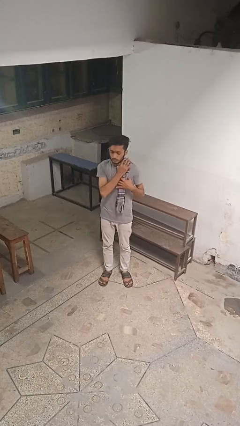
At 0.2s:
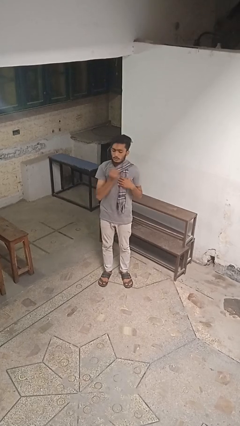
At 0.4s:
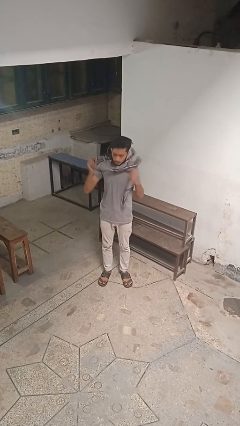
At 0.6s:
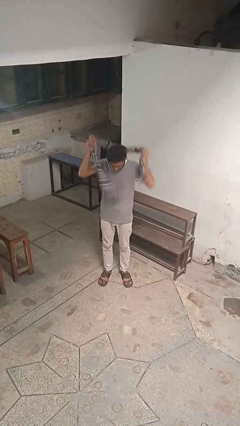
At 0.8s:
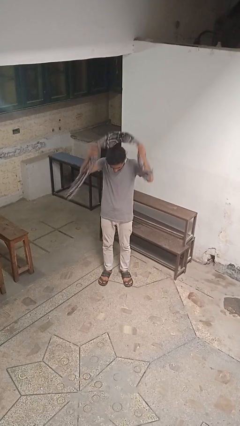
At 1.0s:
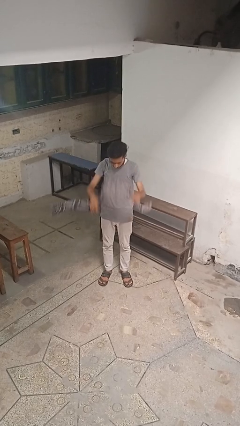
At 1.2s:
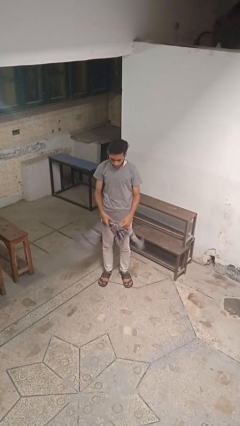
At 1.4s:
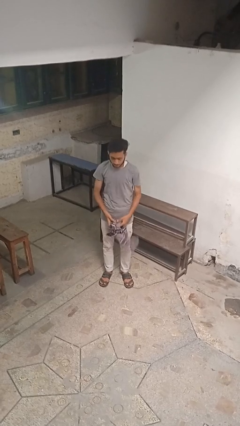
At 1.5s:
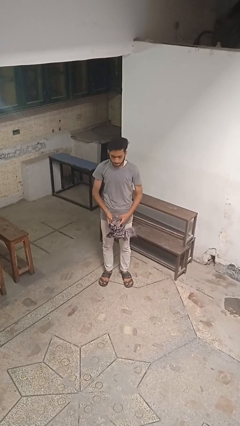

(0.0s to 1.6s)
person takes off scarf

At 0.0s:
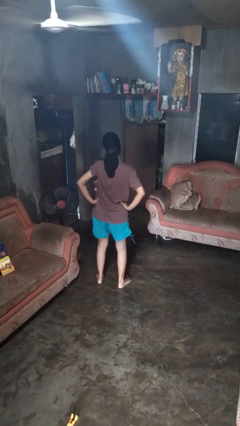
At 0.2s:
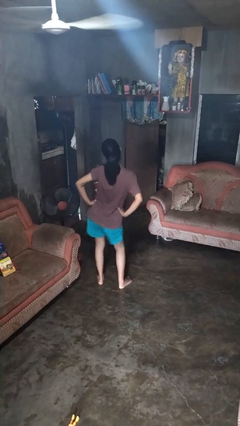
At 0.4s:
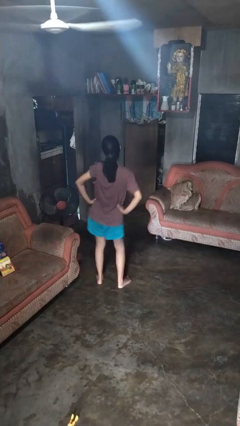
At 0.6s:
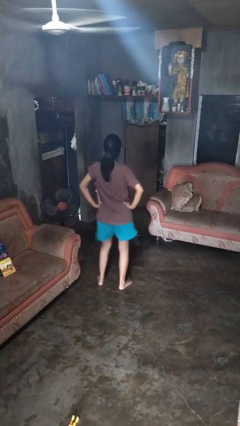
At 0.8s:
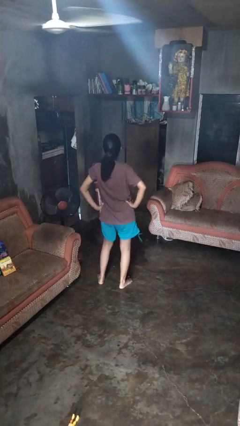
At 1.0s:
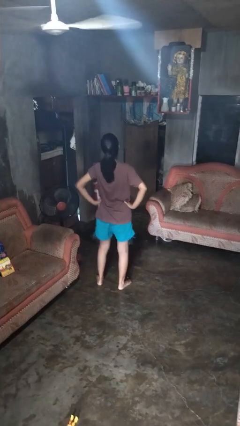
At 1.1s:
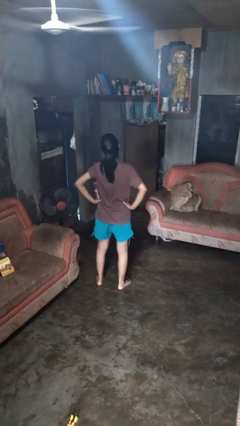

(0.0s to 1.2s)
person dances in place

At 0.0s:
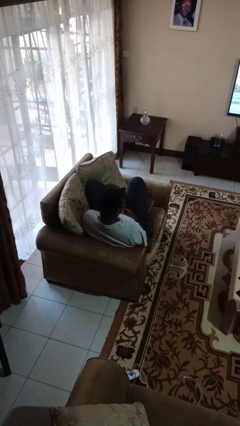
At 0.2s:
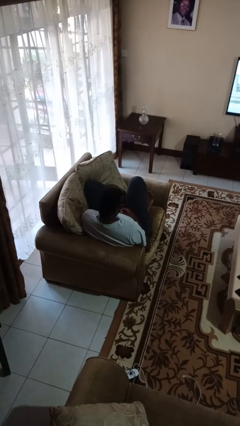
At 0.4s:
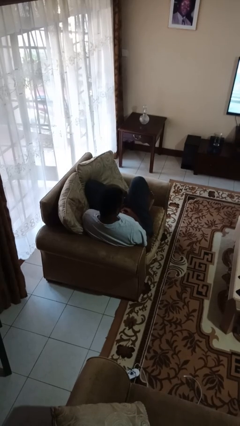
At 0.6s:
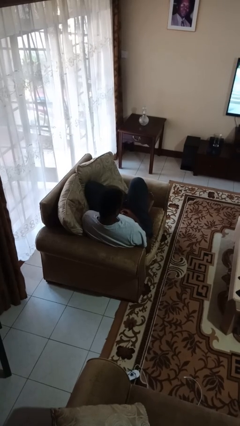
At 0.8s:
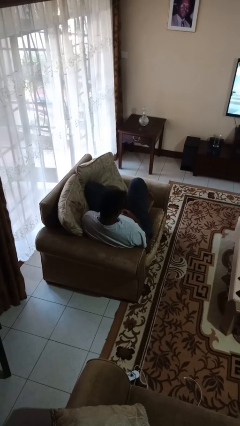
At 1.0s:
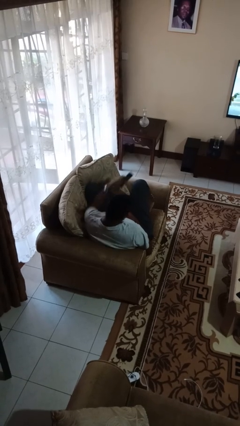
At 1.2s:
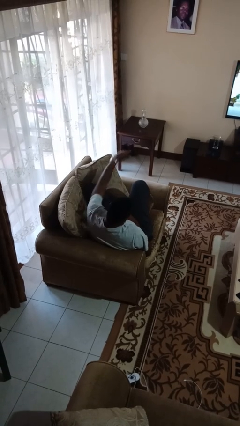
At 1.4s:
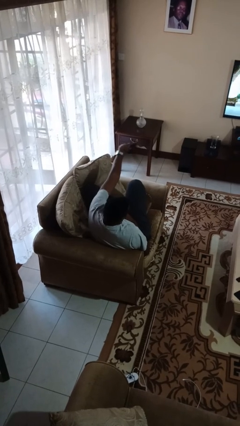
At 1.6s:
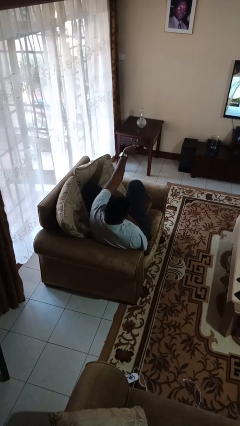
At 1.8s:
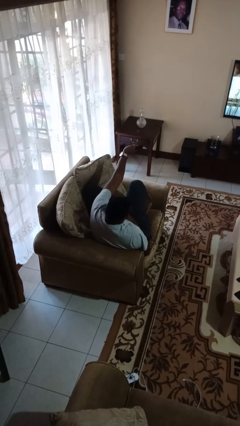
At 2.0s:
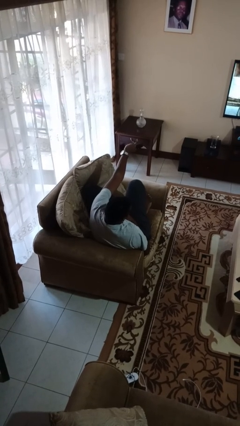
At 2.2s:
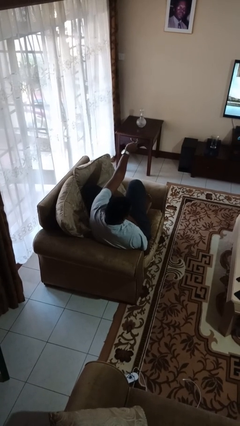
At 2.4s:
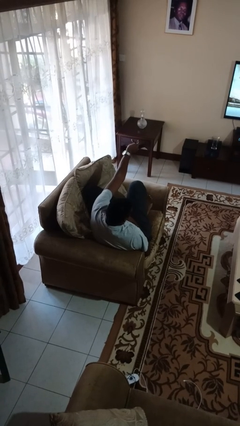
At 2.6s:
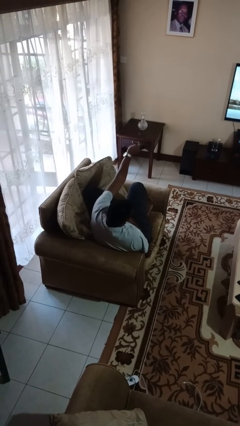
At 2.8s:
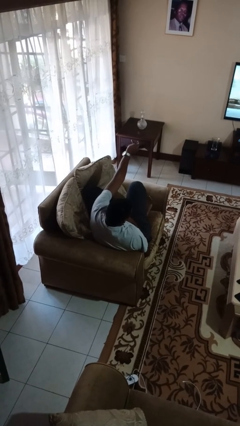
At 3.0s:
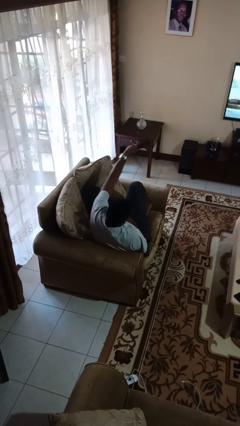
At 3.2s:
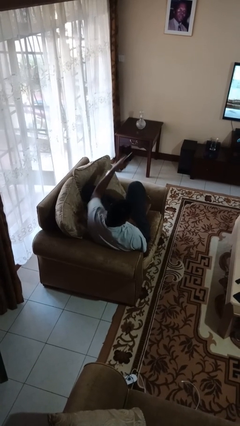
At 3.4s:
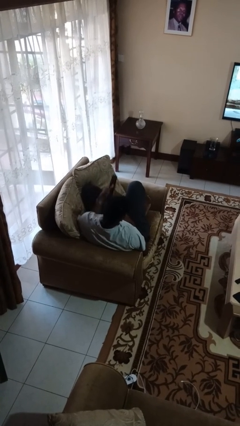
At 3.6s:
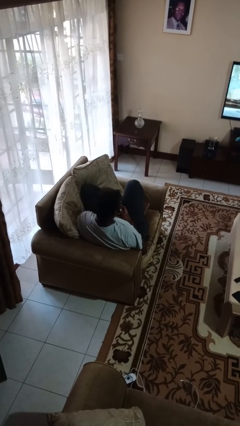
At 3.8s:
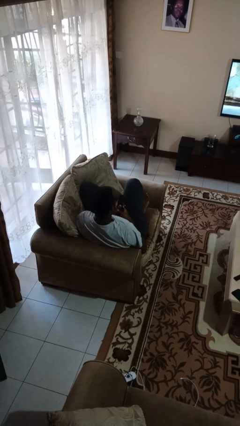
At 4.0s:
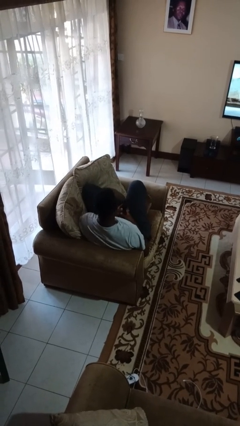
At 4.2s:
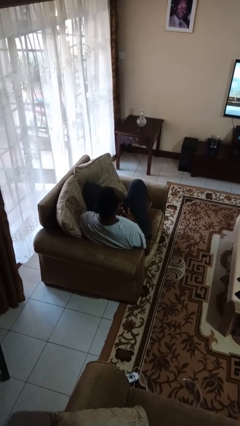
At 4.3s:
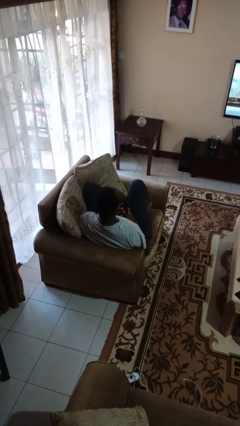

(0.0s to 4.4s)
person uses television remote

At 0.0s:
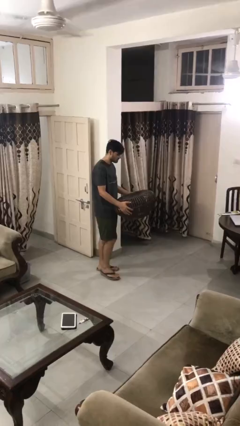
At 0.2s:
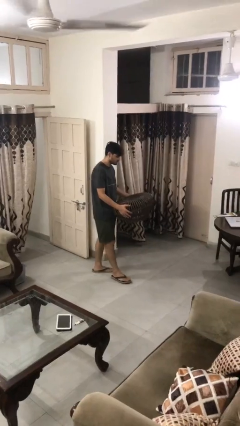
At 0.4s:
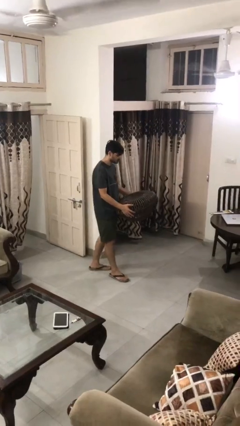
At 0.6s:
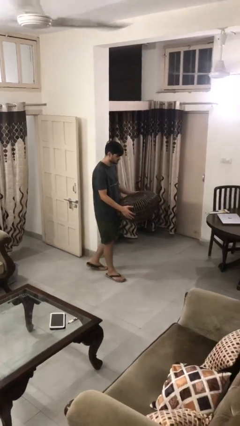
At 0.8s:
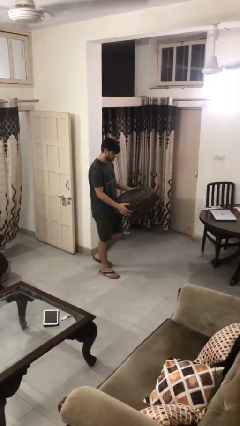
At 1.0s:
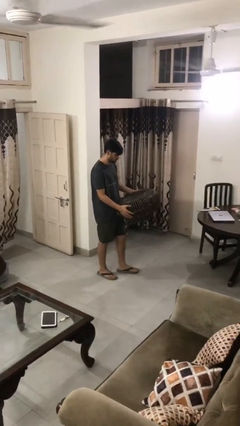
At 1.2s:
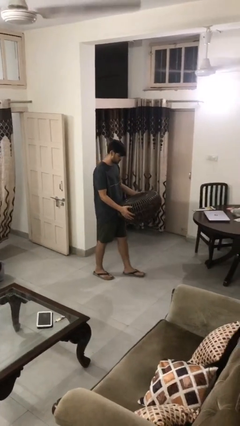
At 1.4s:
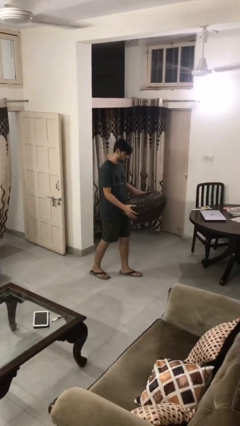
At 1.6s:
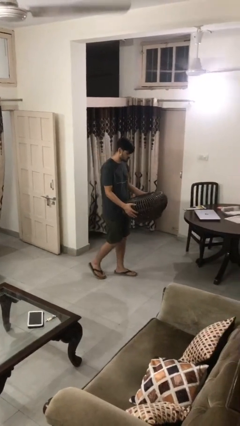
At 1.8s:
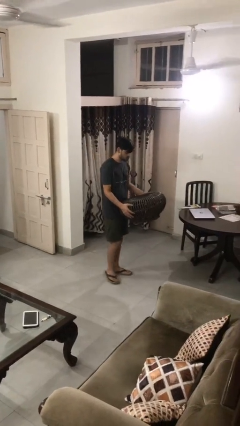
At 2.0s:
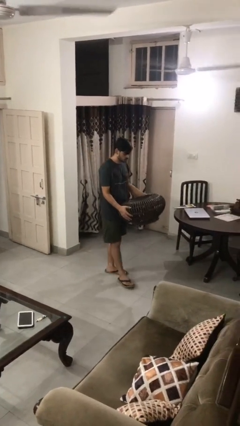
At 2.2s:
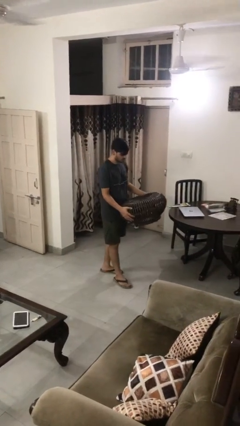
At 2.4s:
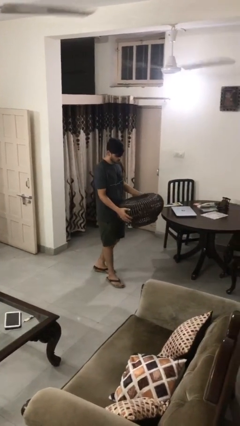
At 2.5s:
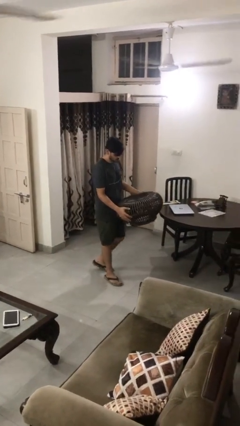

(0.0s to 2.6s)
person carries furniture

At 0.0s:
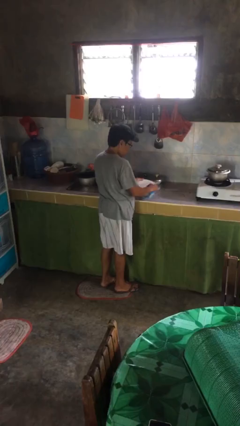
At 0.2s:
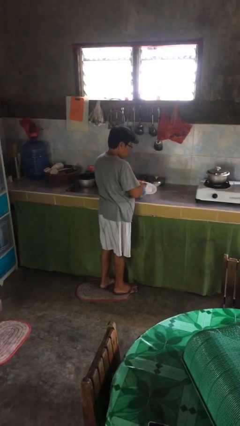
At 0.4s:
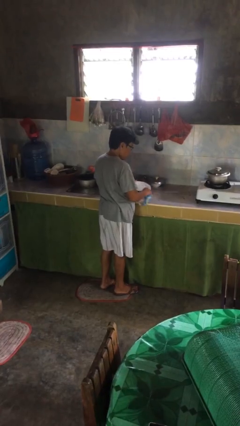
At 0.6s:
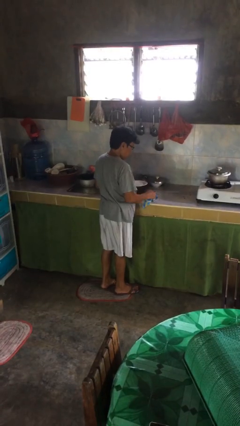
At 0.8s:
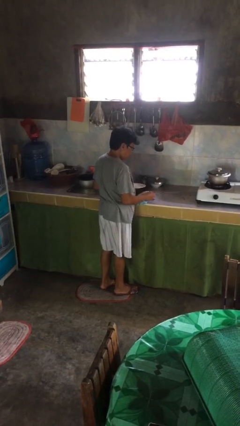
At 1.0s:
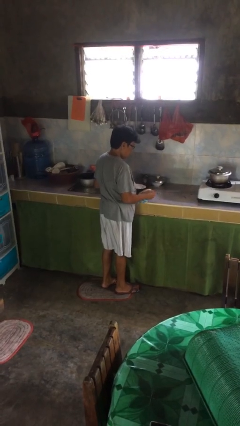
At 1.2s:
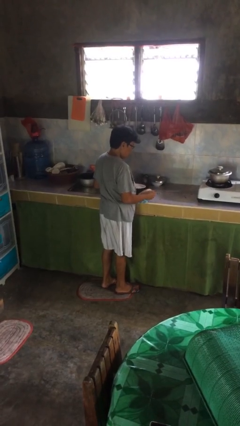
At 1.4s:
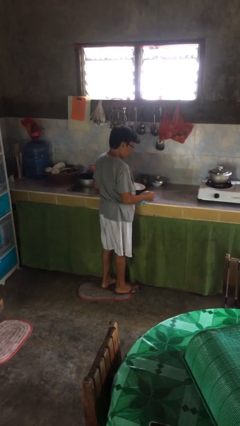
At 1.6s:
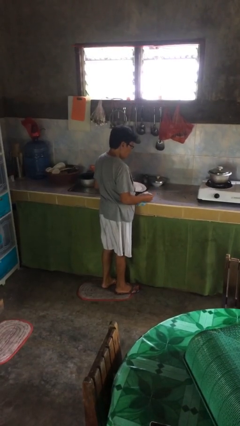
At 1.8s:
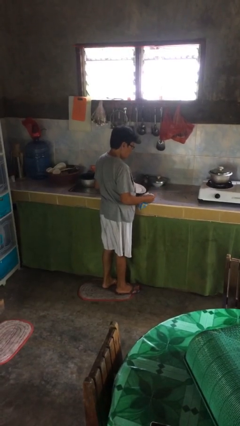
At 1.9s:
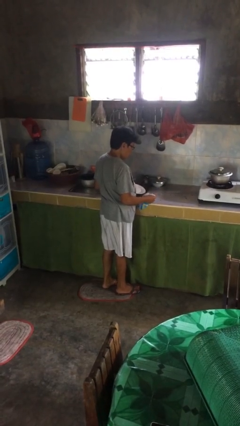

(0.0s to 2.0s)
person dries dish

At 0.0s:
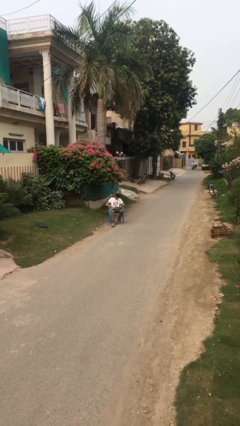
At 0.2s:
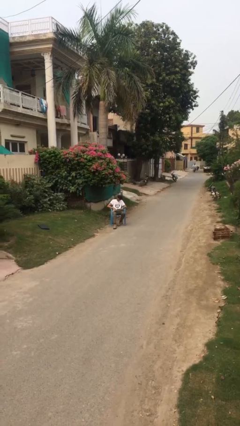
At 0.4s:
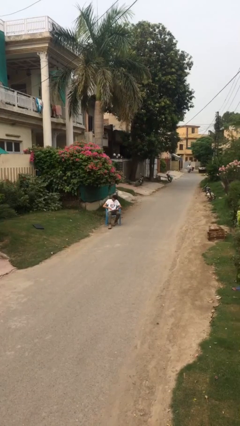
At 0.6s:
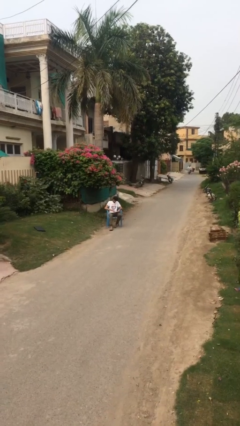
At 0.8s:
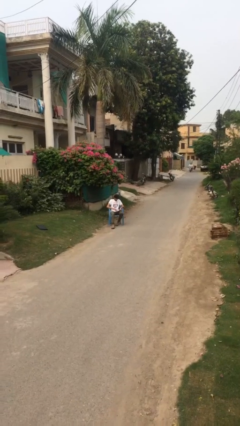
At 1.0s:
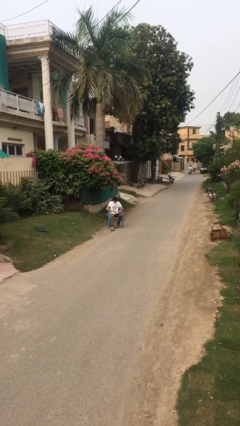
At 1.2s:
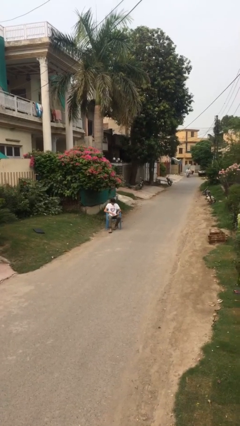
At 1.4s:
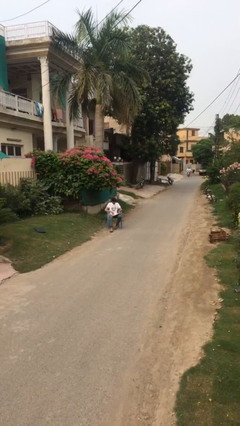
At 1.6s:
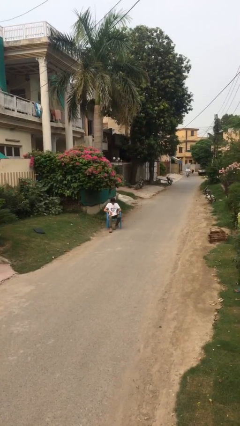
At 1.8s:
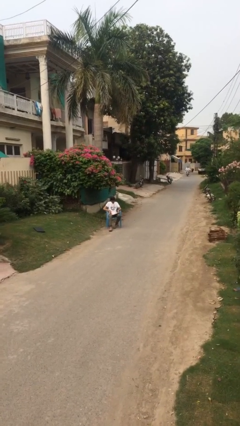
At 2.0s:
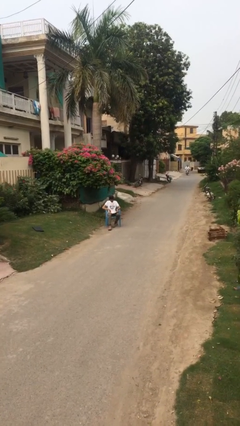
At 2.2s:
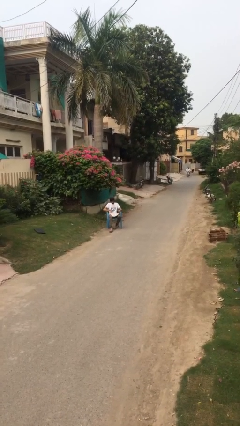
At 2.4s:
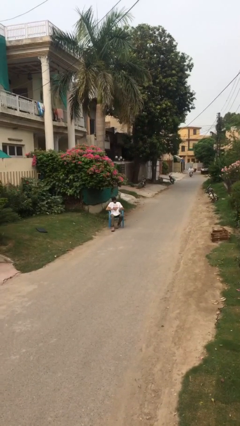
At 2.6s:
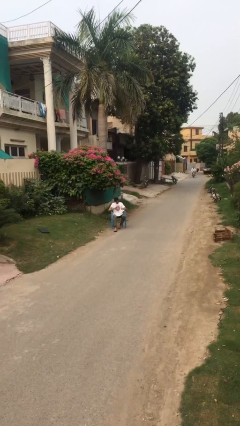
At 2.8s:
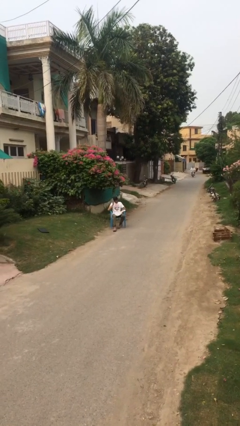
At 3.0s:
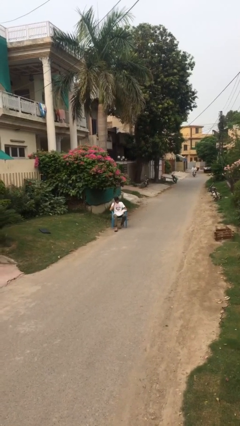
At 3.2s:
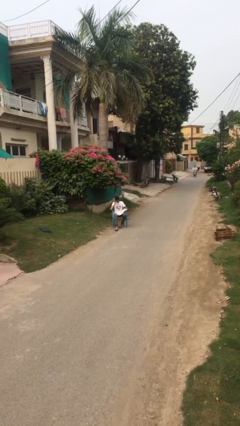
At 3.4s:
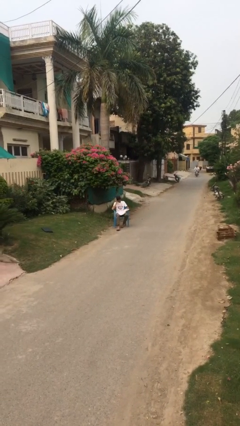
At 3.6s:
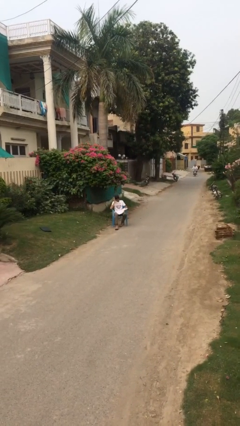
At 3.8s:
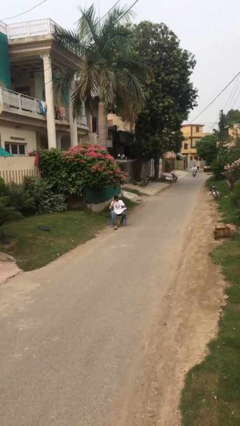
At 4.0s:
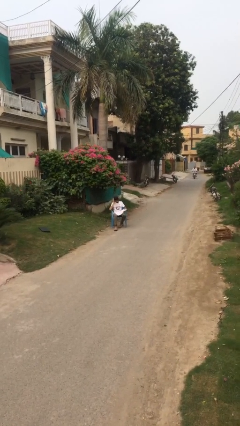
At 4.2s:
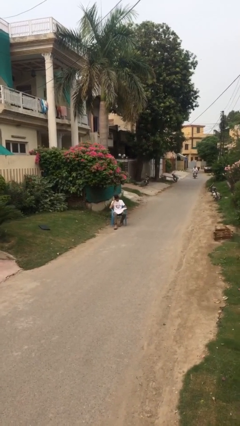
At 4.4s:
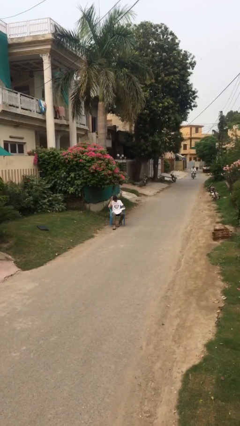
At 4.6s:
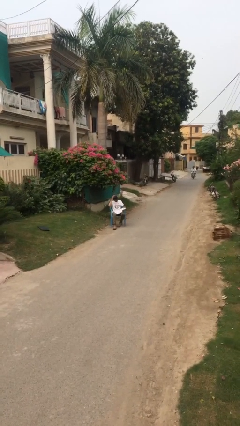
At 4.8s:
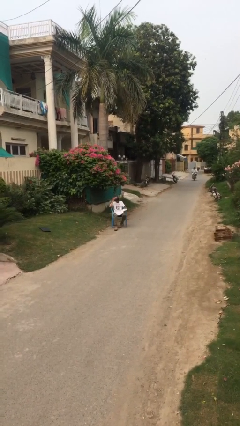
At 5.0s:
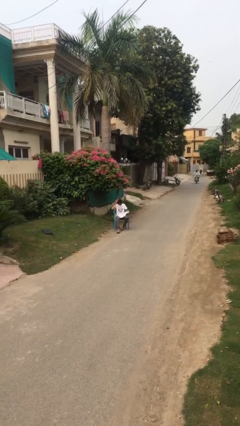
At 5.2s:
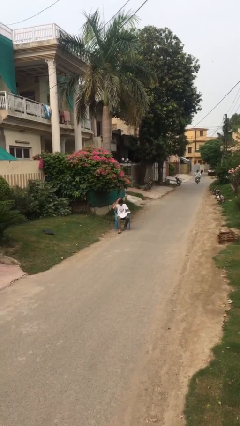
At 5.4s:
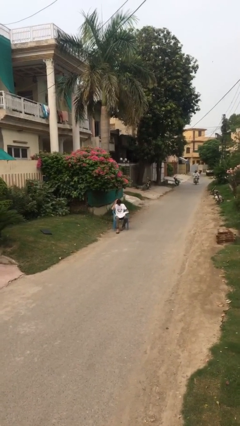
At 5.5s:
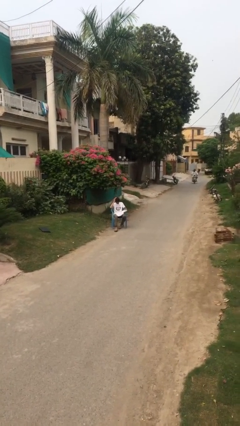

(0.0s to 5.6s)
person reads document

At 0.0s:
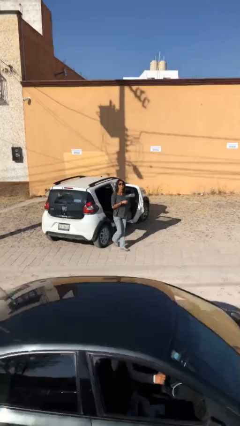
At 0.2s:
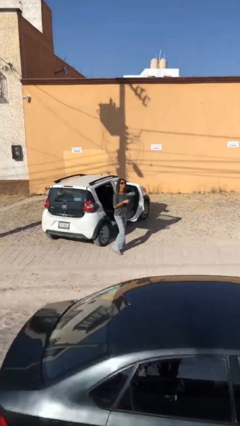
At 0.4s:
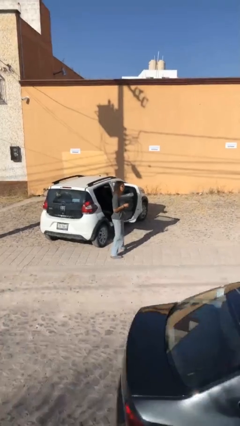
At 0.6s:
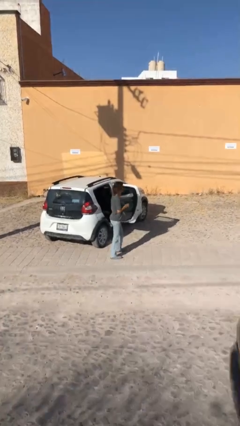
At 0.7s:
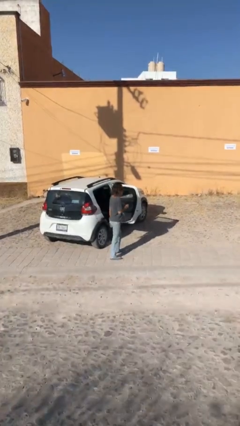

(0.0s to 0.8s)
person exits car
